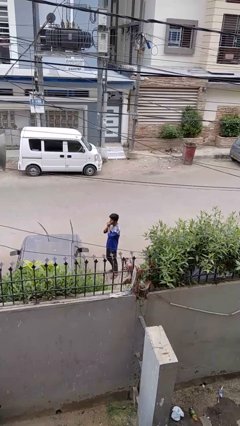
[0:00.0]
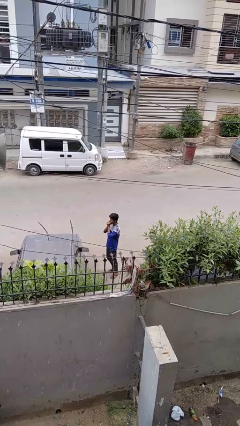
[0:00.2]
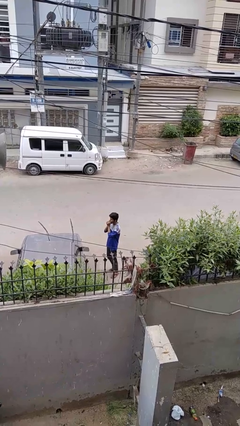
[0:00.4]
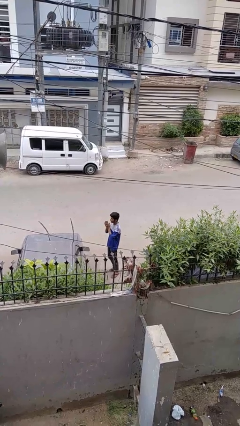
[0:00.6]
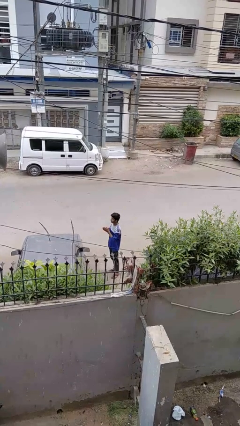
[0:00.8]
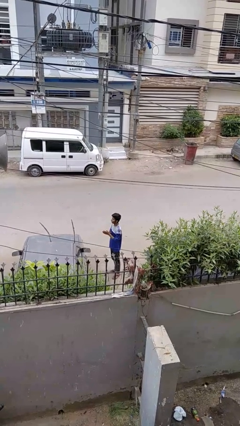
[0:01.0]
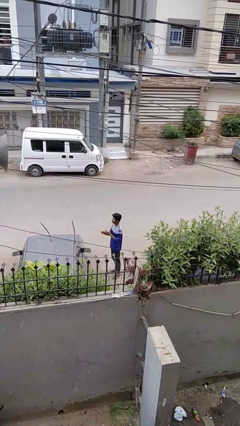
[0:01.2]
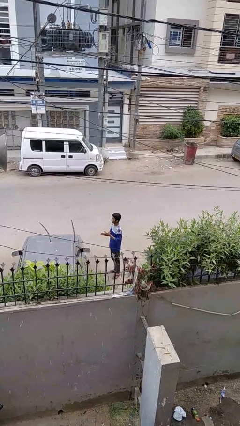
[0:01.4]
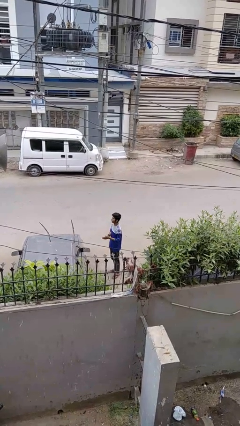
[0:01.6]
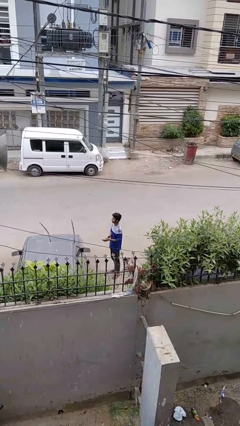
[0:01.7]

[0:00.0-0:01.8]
person blows into hands

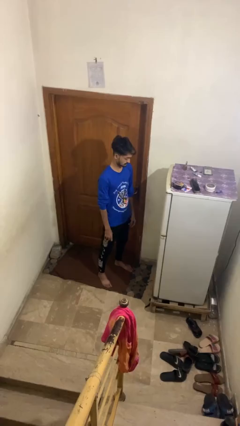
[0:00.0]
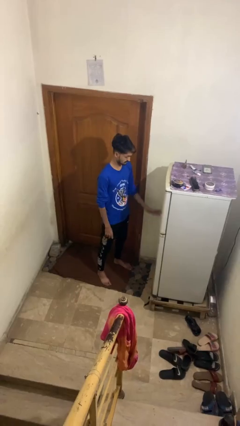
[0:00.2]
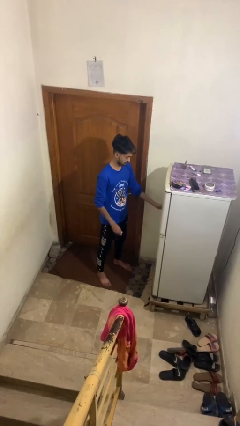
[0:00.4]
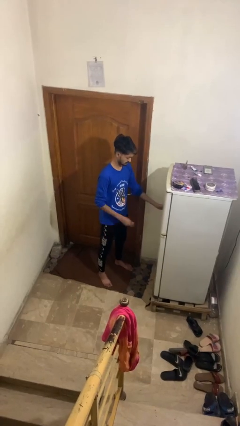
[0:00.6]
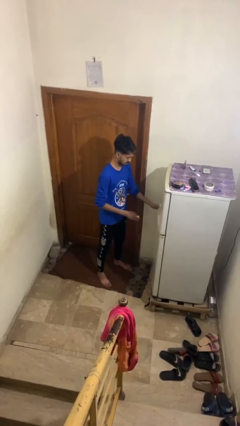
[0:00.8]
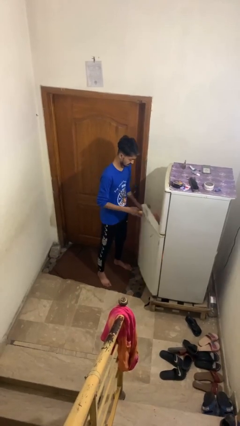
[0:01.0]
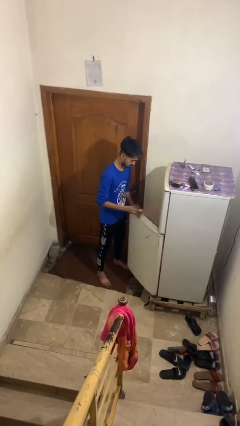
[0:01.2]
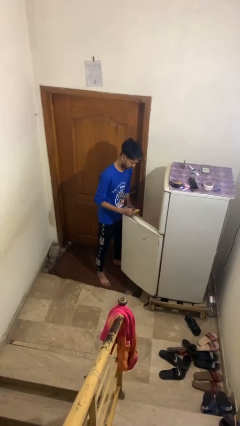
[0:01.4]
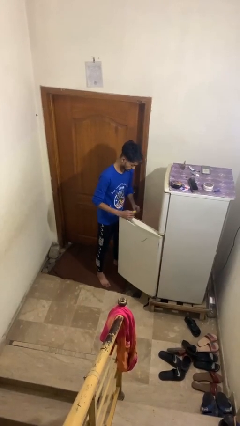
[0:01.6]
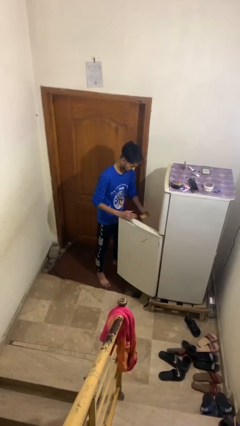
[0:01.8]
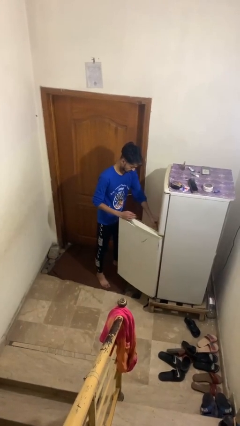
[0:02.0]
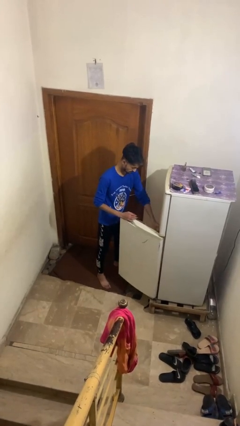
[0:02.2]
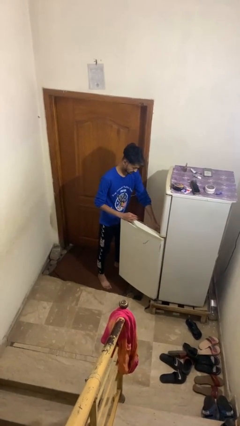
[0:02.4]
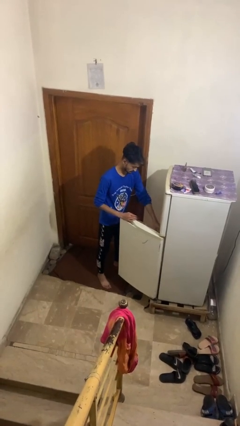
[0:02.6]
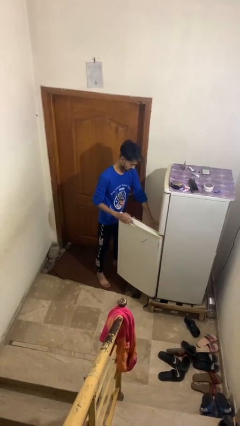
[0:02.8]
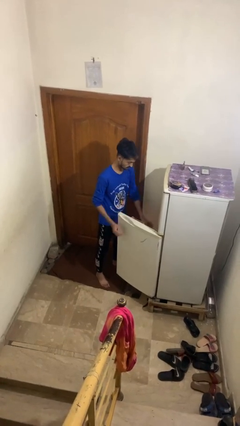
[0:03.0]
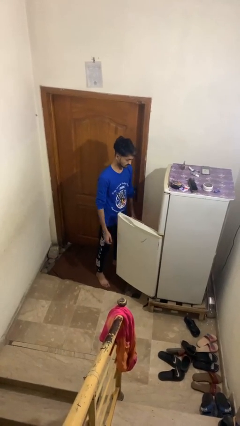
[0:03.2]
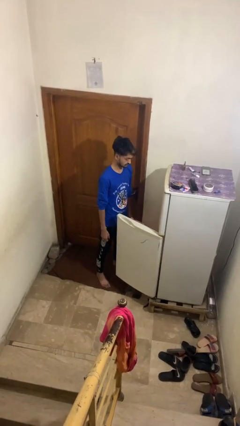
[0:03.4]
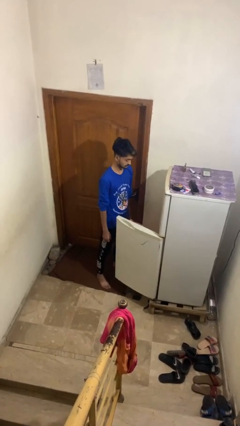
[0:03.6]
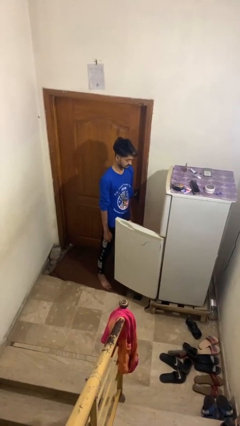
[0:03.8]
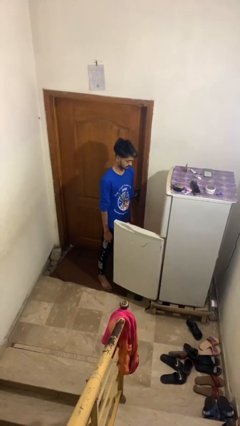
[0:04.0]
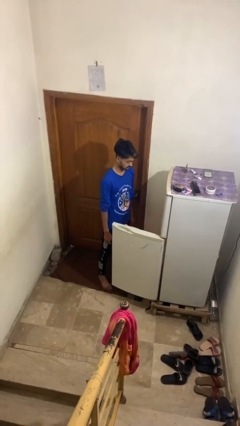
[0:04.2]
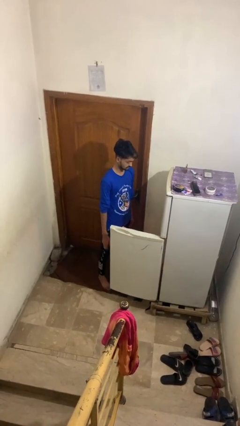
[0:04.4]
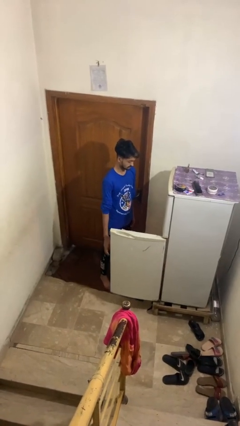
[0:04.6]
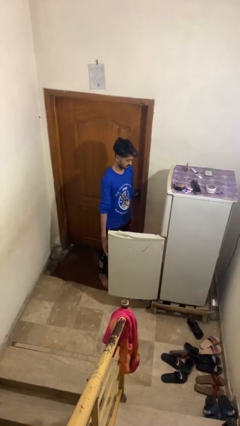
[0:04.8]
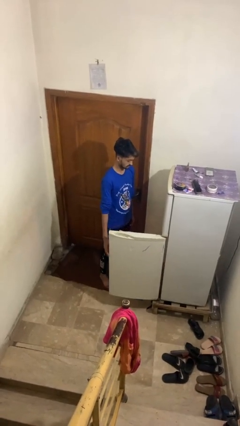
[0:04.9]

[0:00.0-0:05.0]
person puts object into refrigerator

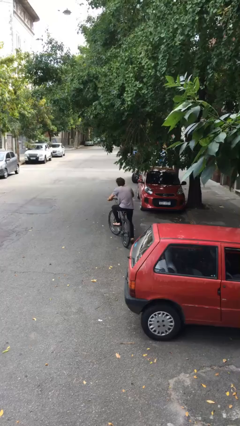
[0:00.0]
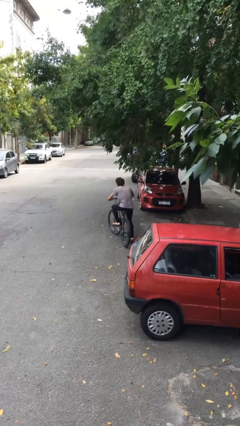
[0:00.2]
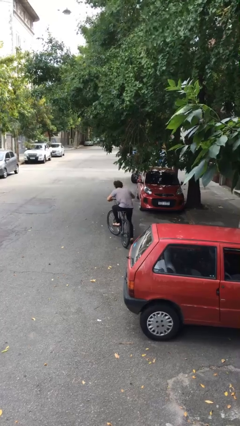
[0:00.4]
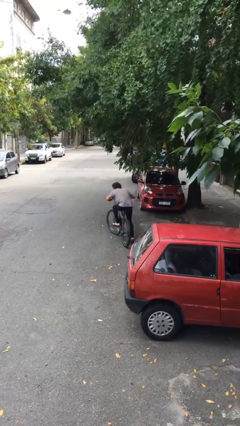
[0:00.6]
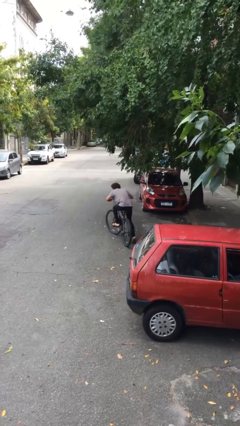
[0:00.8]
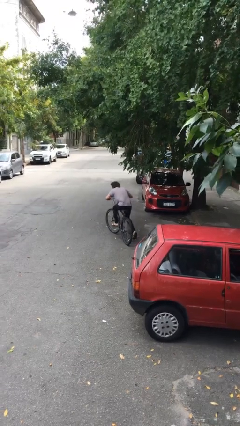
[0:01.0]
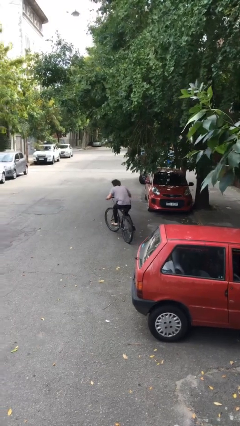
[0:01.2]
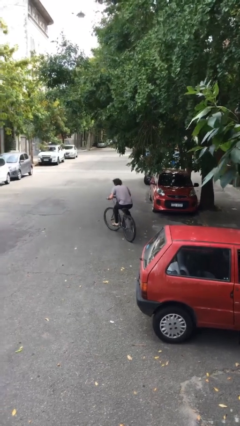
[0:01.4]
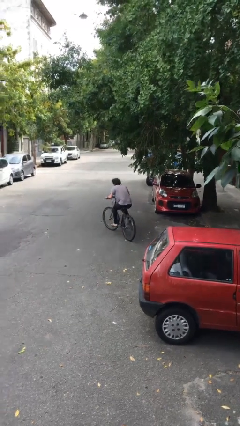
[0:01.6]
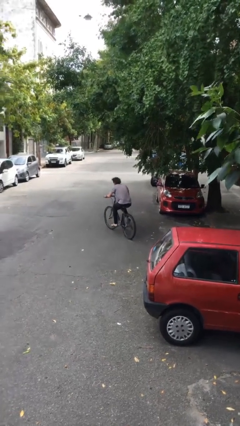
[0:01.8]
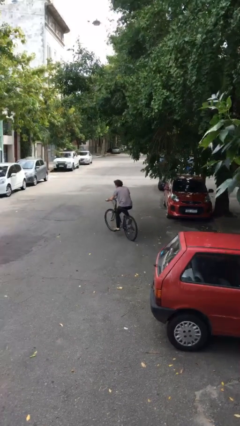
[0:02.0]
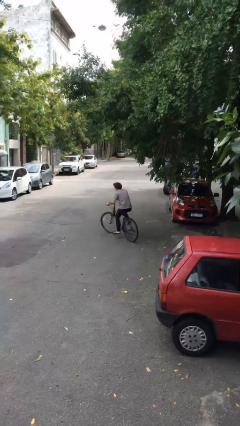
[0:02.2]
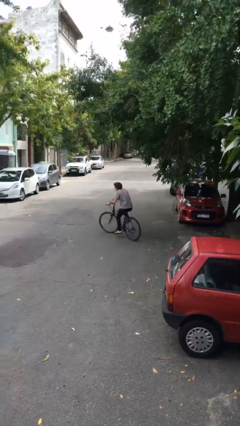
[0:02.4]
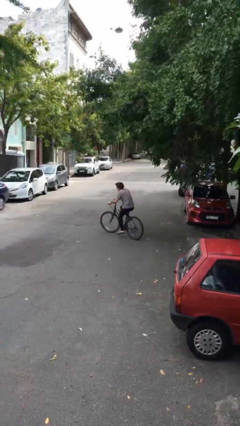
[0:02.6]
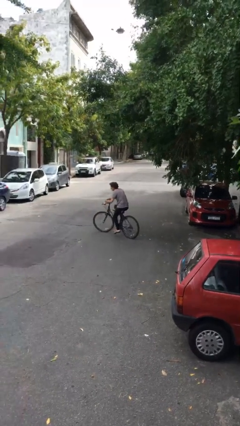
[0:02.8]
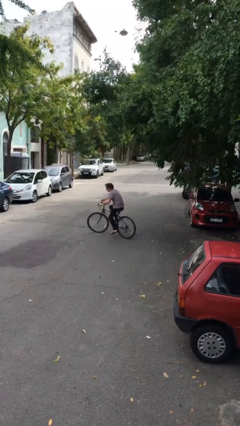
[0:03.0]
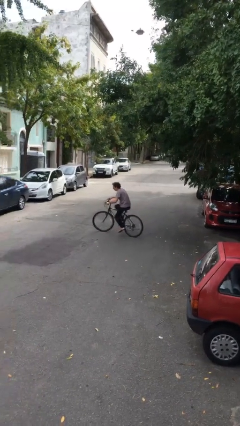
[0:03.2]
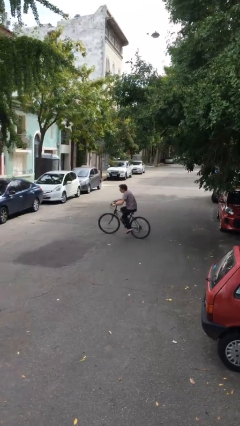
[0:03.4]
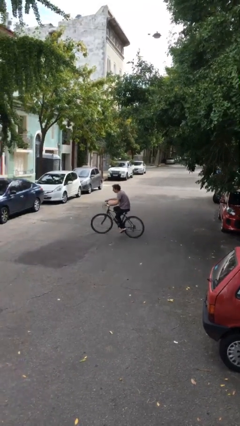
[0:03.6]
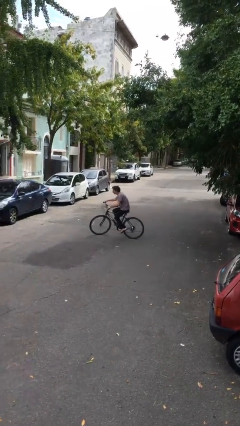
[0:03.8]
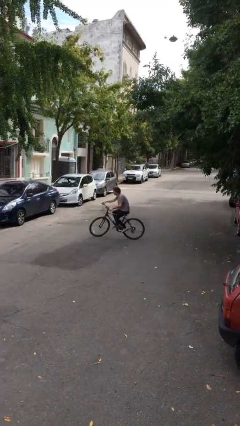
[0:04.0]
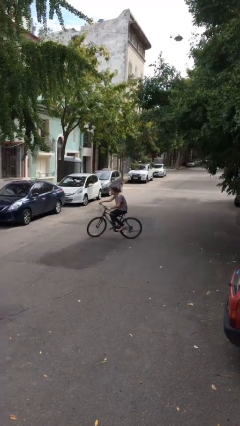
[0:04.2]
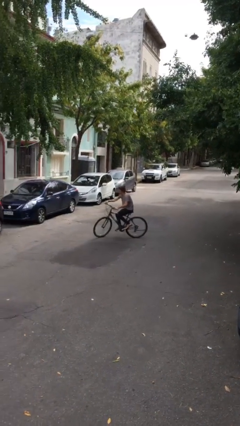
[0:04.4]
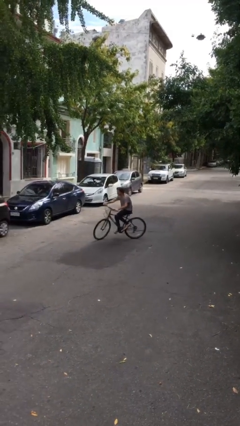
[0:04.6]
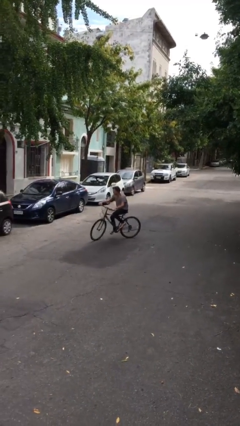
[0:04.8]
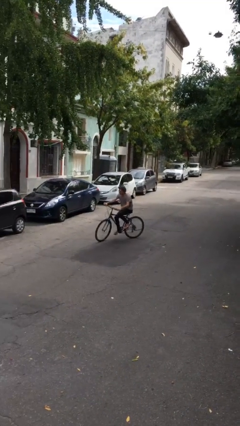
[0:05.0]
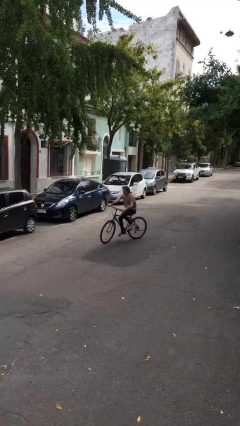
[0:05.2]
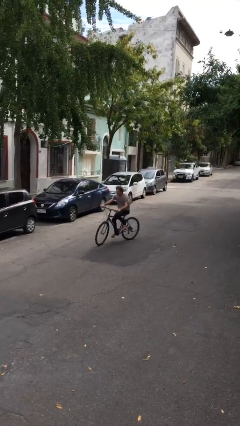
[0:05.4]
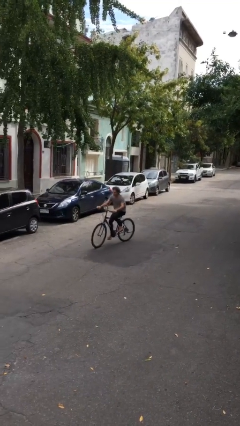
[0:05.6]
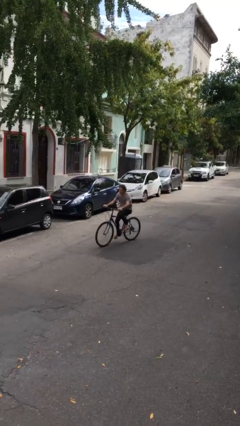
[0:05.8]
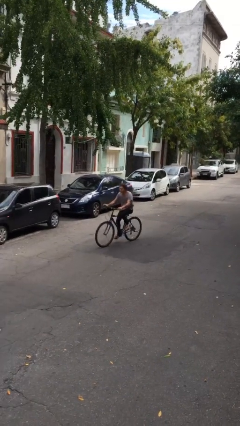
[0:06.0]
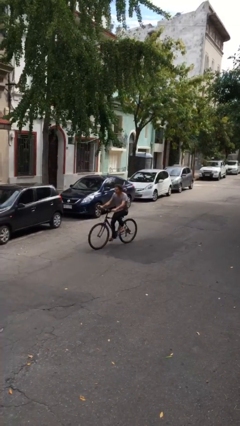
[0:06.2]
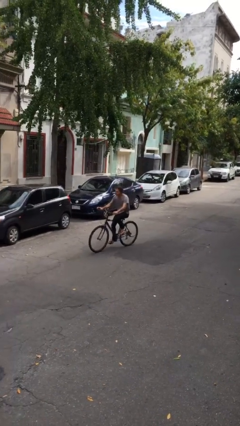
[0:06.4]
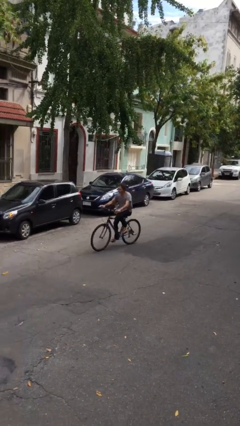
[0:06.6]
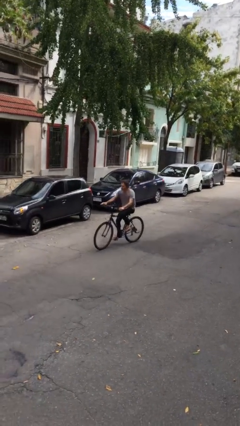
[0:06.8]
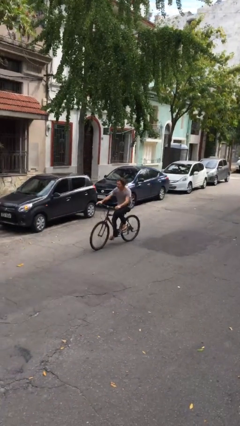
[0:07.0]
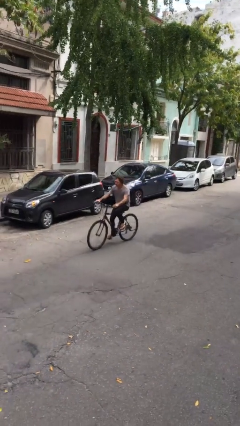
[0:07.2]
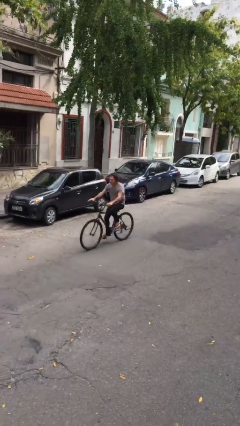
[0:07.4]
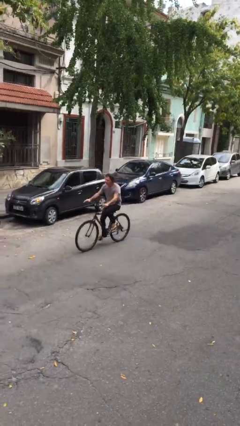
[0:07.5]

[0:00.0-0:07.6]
person rides bicycle

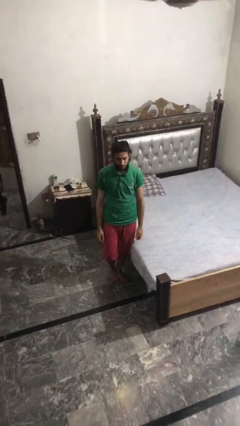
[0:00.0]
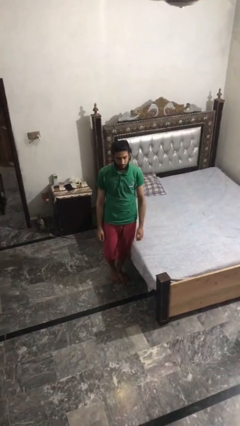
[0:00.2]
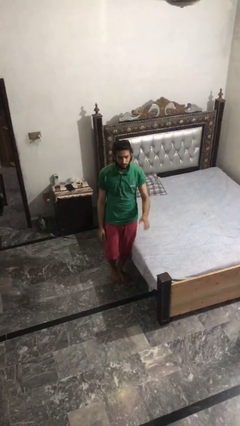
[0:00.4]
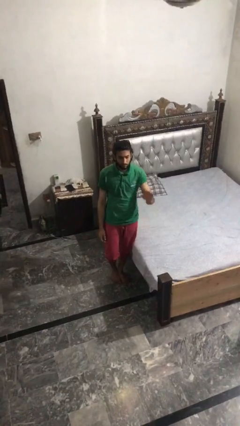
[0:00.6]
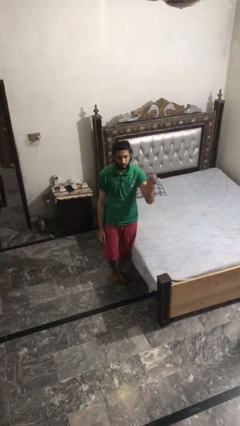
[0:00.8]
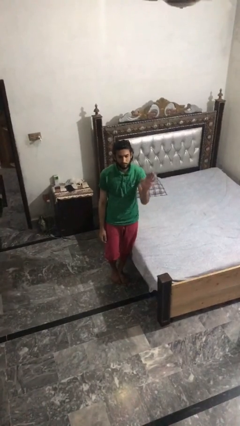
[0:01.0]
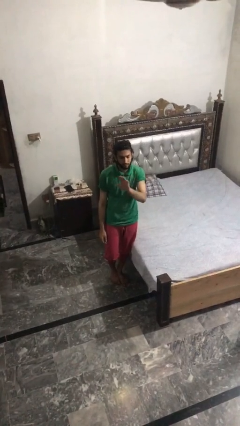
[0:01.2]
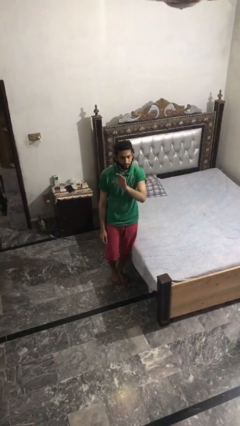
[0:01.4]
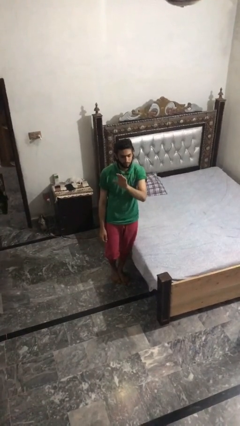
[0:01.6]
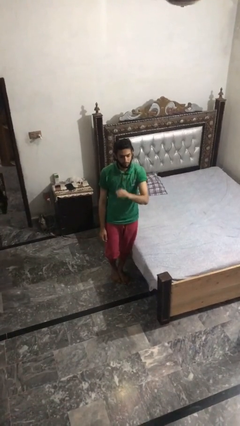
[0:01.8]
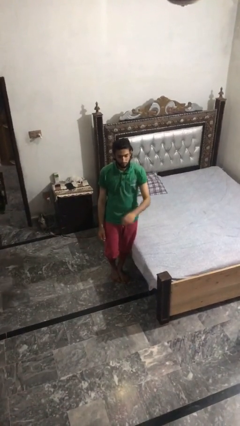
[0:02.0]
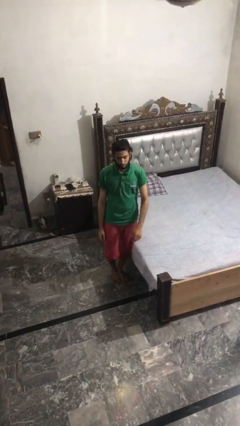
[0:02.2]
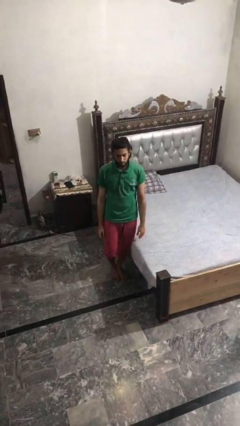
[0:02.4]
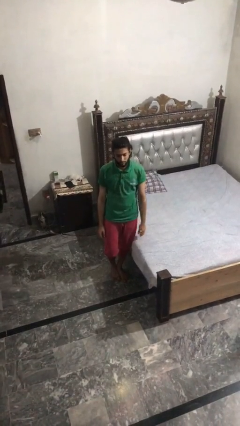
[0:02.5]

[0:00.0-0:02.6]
person gestures swipe left

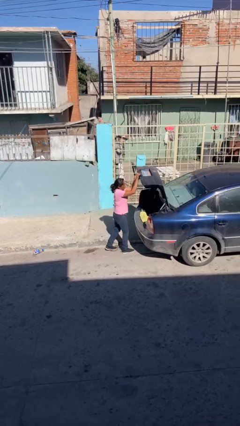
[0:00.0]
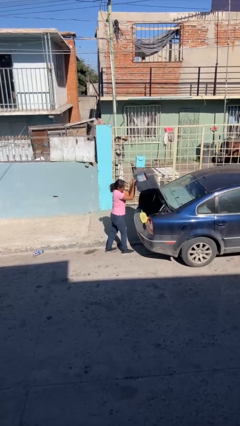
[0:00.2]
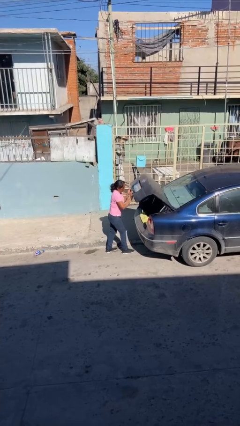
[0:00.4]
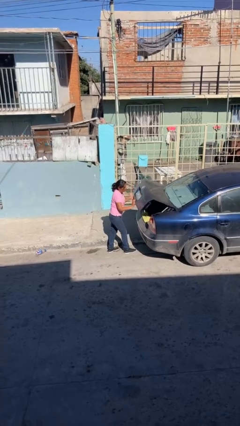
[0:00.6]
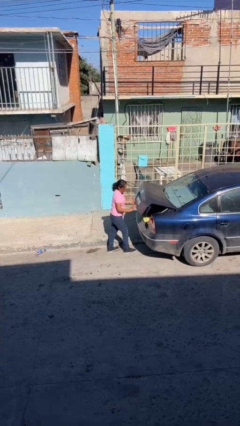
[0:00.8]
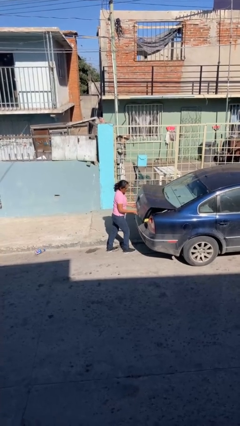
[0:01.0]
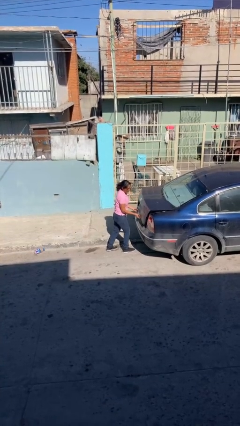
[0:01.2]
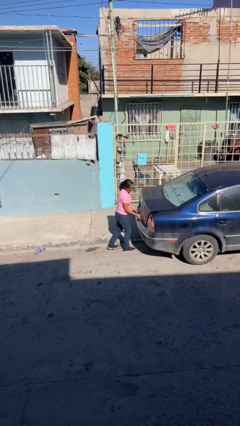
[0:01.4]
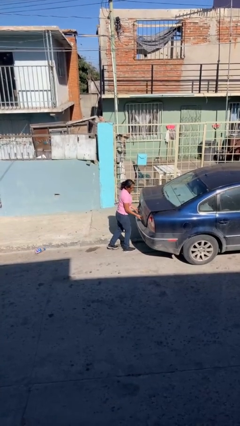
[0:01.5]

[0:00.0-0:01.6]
person closes car trunk
